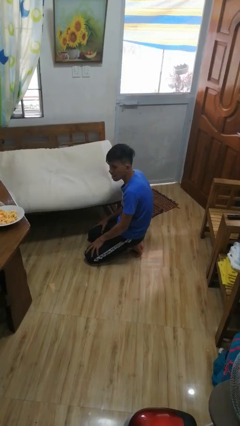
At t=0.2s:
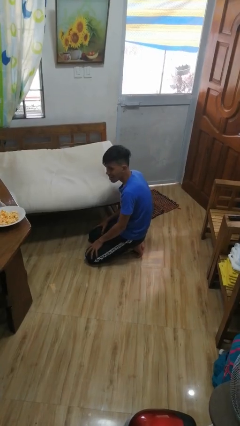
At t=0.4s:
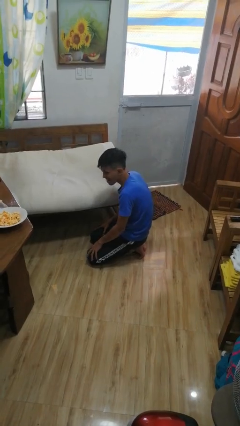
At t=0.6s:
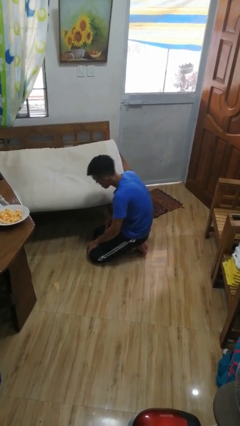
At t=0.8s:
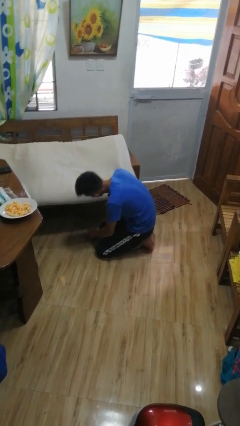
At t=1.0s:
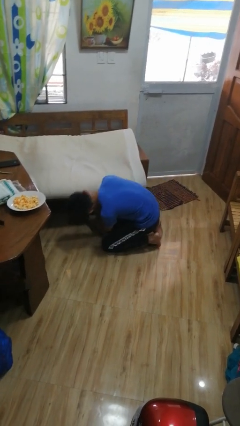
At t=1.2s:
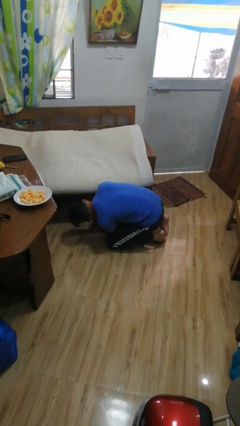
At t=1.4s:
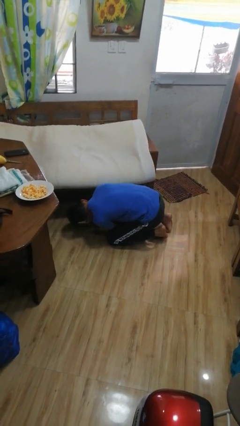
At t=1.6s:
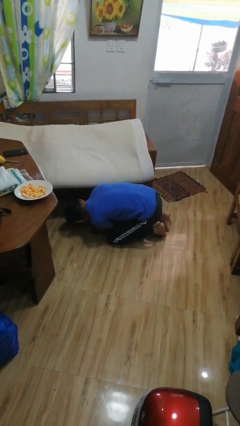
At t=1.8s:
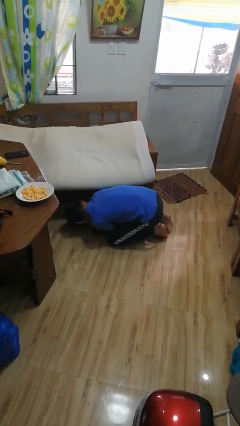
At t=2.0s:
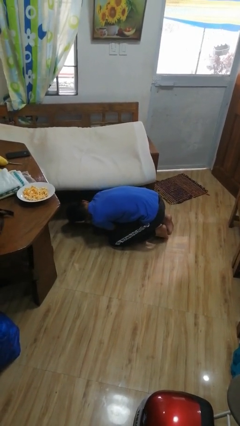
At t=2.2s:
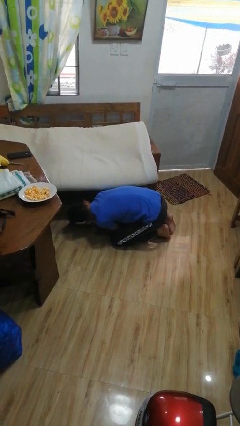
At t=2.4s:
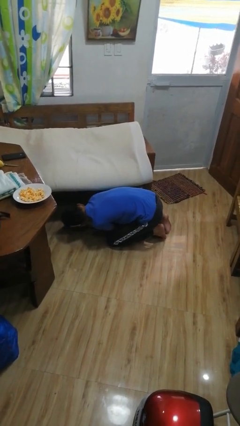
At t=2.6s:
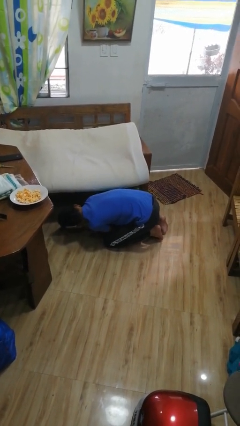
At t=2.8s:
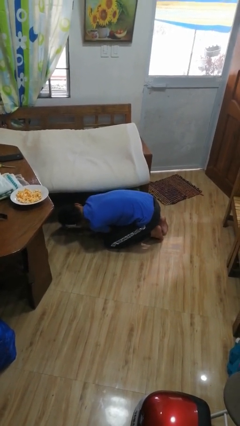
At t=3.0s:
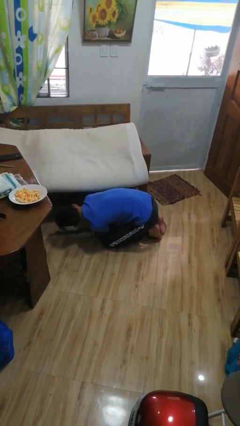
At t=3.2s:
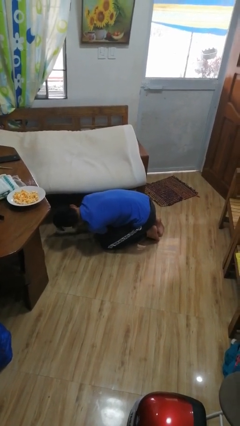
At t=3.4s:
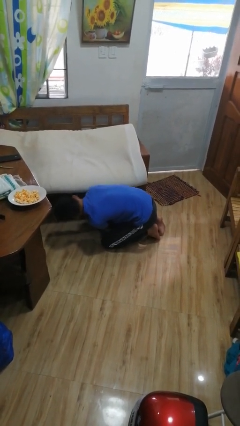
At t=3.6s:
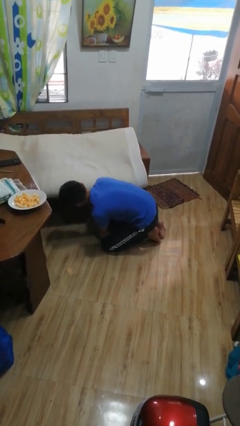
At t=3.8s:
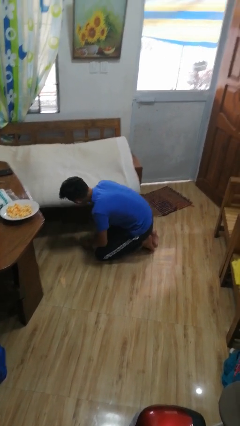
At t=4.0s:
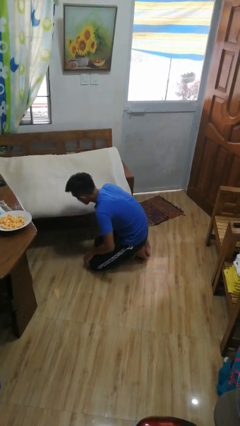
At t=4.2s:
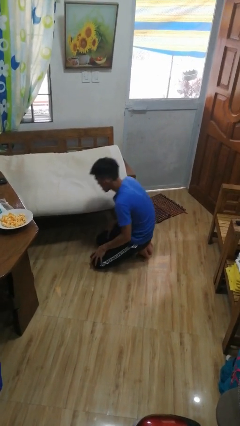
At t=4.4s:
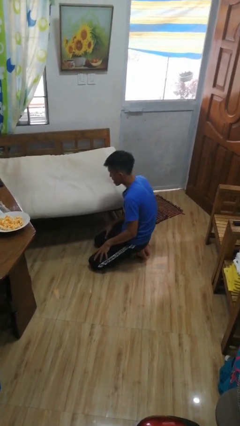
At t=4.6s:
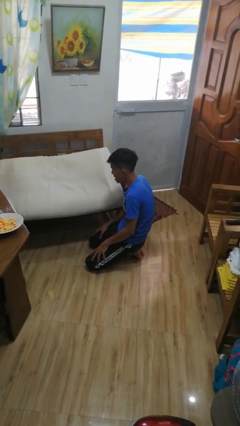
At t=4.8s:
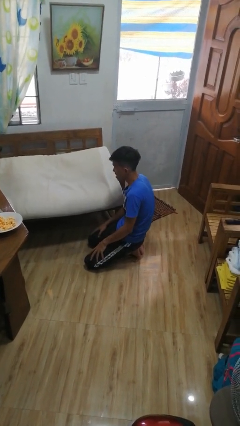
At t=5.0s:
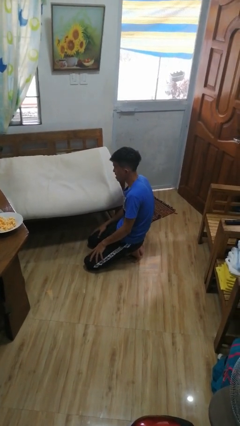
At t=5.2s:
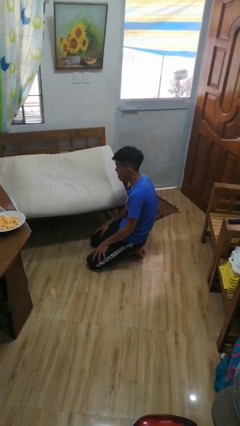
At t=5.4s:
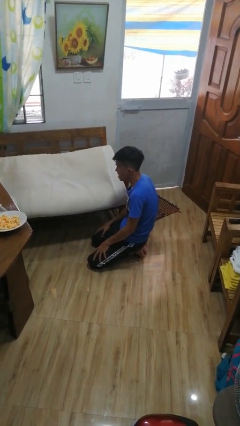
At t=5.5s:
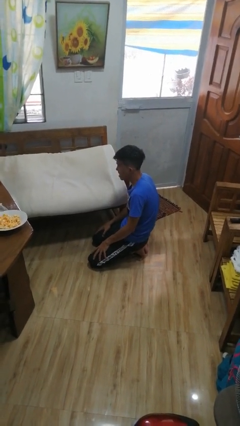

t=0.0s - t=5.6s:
person searches under couch

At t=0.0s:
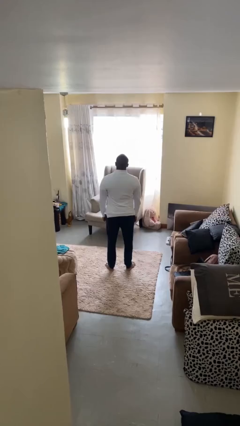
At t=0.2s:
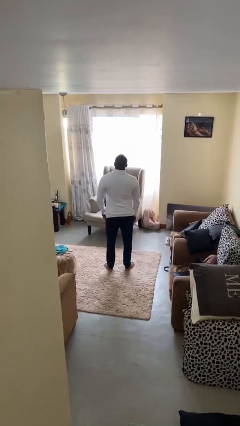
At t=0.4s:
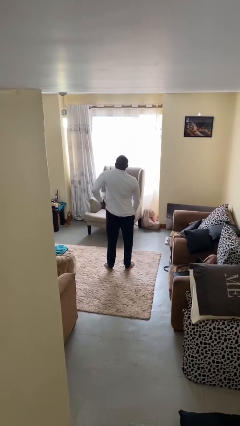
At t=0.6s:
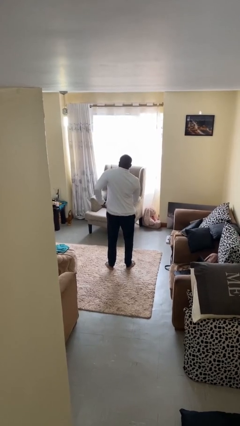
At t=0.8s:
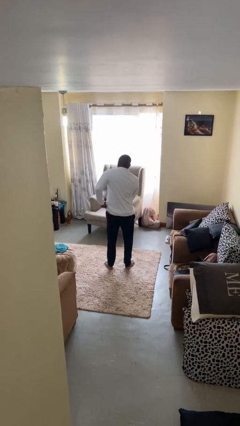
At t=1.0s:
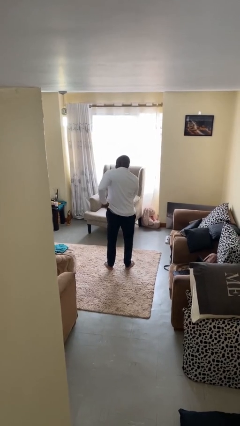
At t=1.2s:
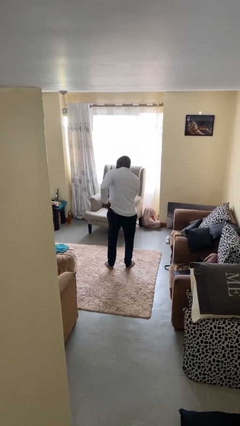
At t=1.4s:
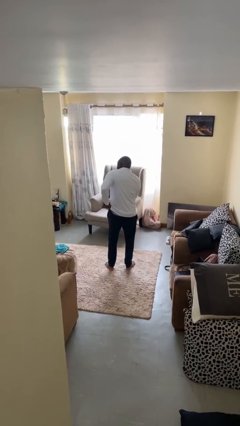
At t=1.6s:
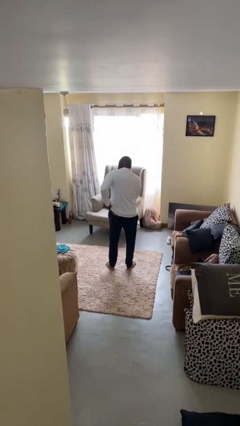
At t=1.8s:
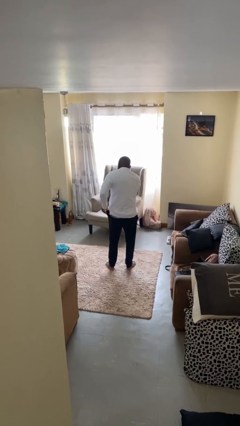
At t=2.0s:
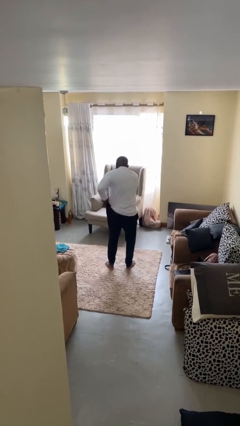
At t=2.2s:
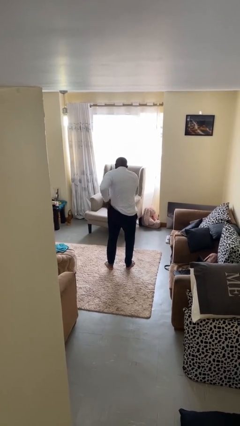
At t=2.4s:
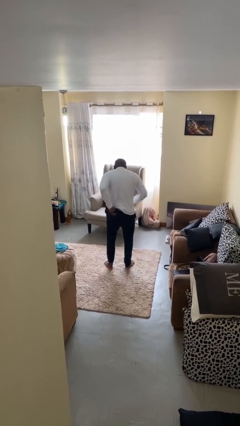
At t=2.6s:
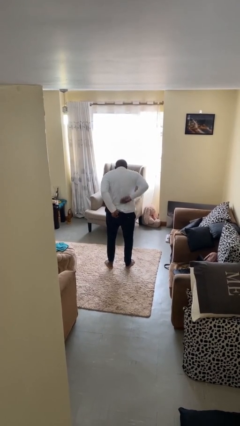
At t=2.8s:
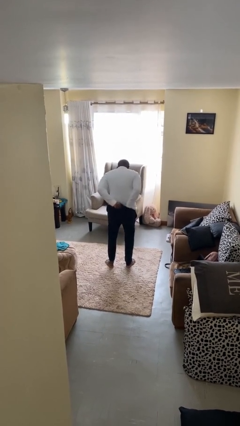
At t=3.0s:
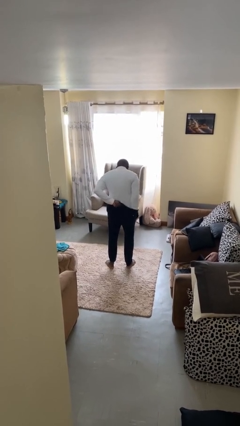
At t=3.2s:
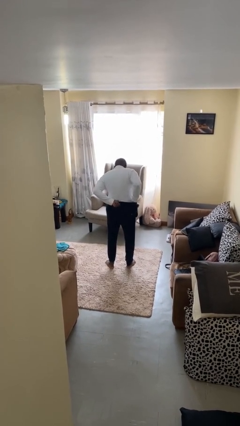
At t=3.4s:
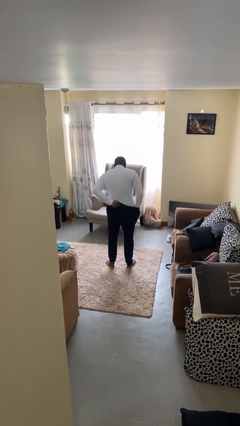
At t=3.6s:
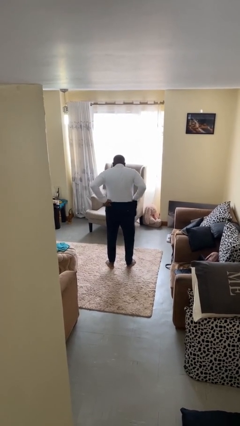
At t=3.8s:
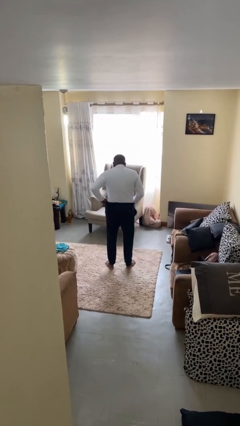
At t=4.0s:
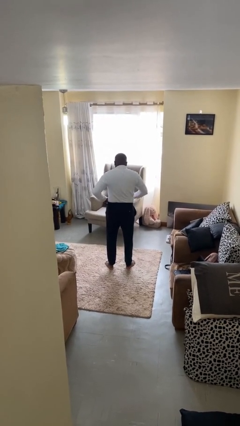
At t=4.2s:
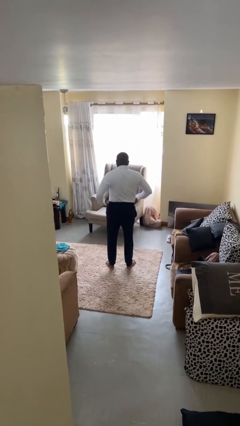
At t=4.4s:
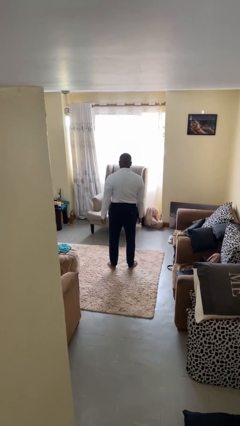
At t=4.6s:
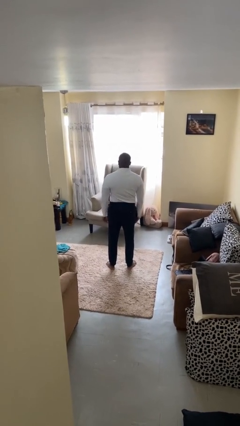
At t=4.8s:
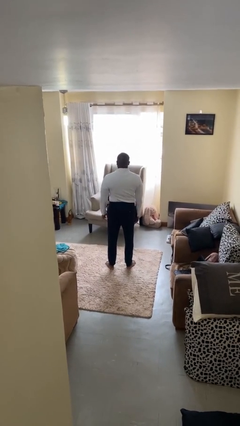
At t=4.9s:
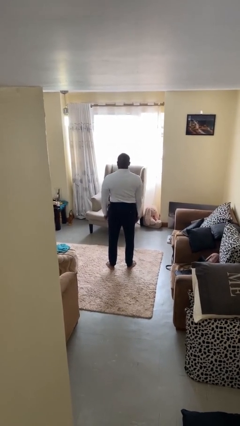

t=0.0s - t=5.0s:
person tucks in shirt

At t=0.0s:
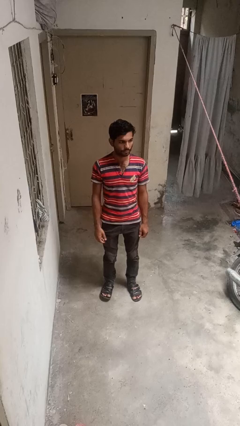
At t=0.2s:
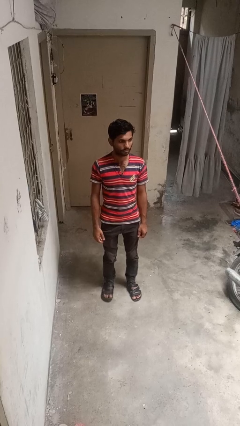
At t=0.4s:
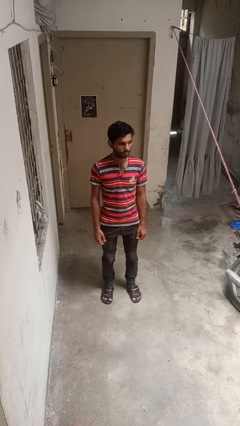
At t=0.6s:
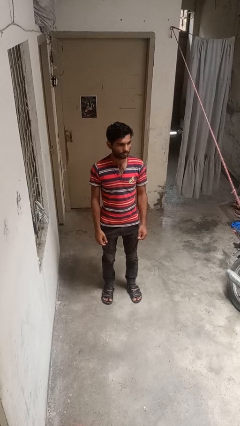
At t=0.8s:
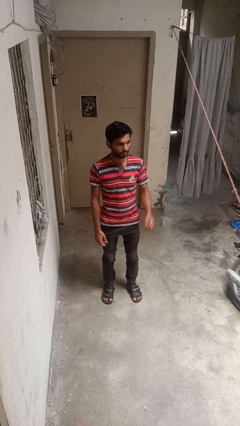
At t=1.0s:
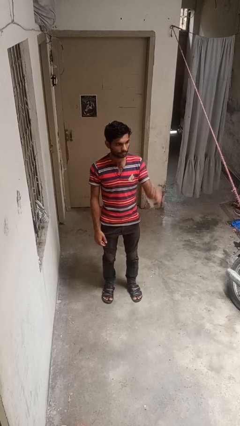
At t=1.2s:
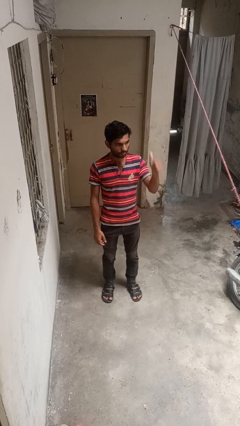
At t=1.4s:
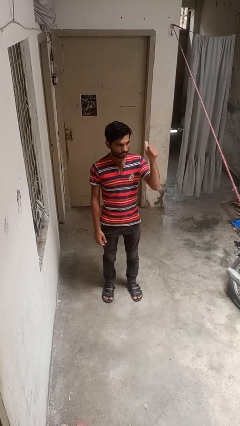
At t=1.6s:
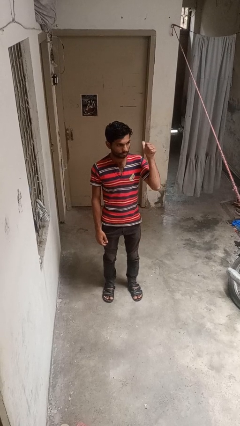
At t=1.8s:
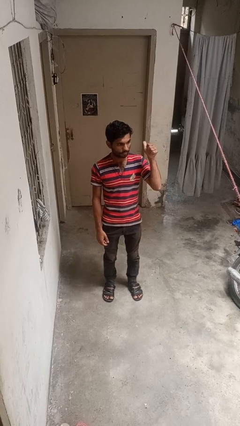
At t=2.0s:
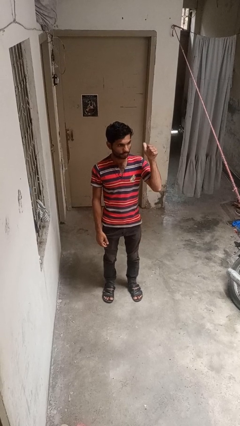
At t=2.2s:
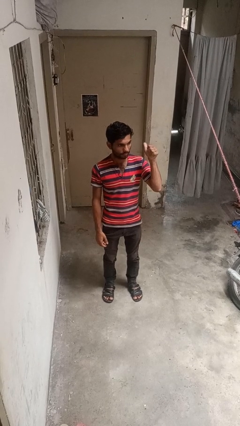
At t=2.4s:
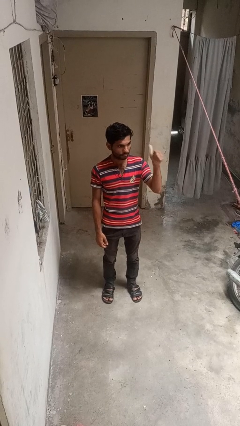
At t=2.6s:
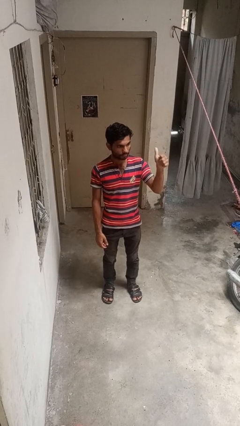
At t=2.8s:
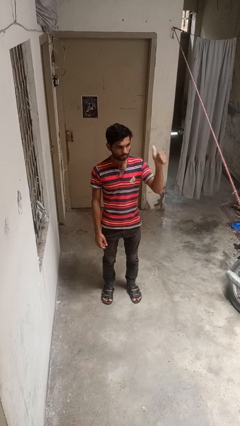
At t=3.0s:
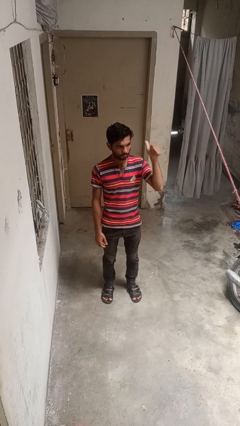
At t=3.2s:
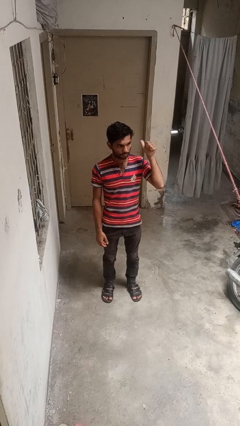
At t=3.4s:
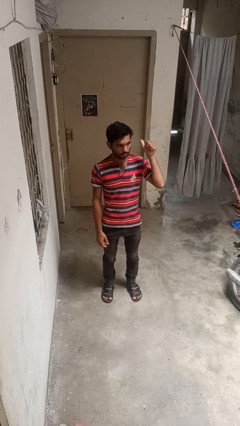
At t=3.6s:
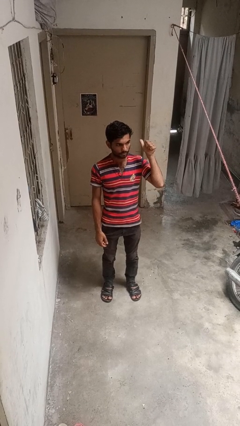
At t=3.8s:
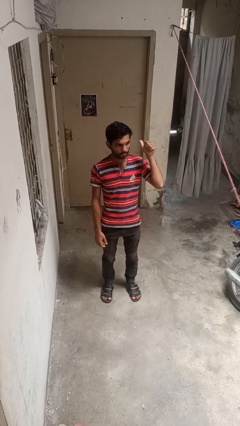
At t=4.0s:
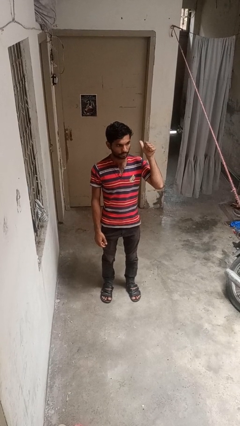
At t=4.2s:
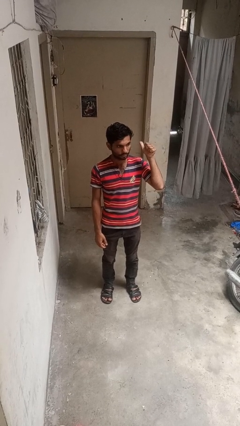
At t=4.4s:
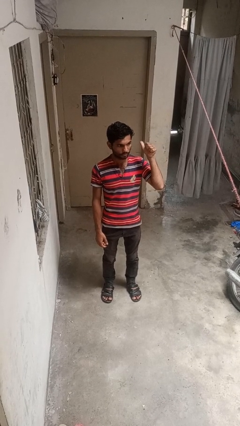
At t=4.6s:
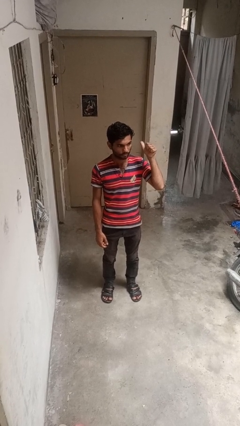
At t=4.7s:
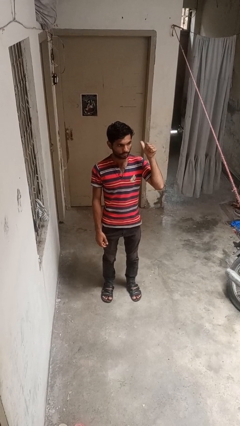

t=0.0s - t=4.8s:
person gestures behind me

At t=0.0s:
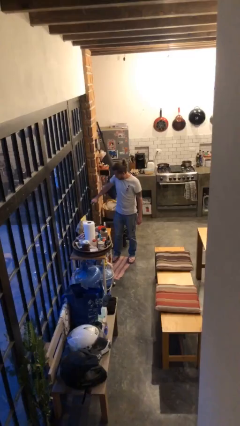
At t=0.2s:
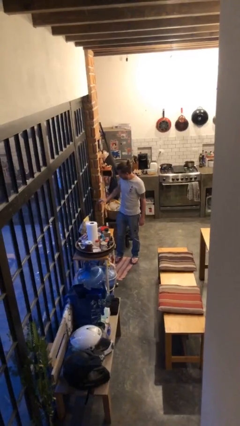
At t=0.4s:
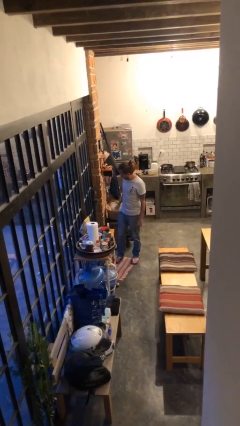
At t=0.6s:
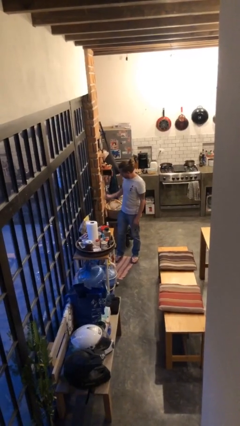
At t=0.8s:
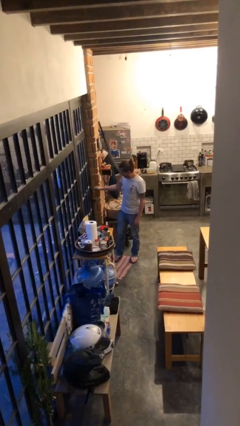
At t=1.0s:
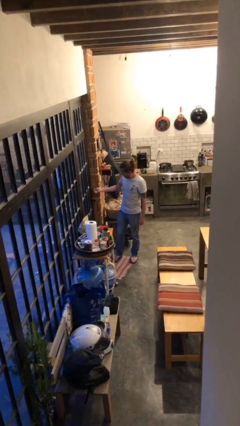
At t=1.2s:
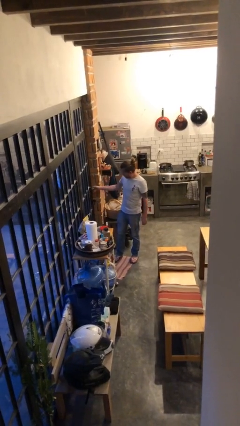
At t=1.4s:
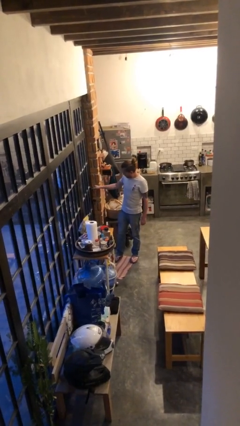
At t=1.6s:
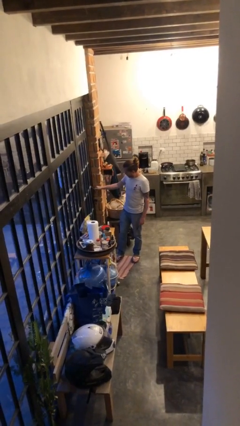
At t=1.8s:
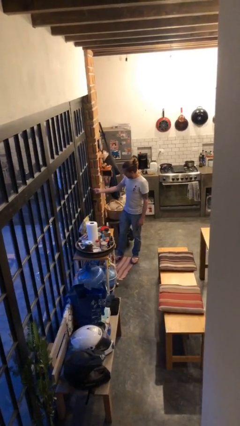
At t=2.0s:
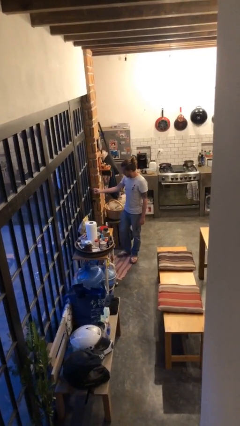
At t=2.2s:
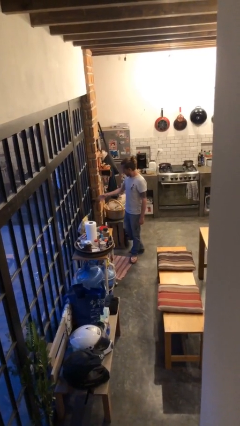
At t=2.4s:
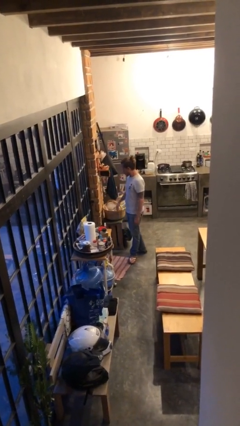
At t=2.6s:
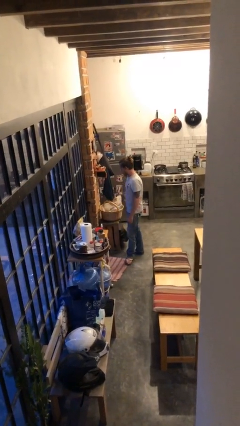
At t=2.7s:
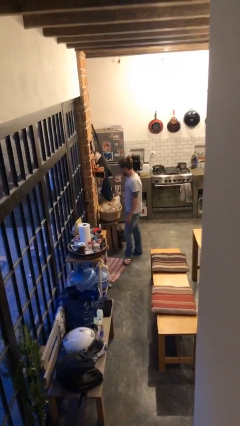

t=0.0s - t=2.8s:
person locks door with keys
